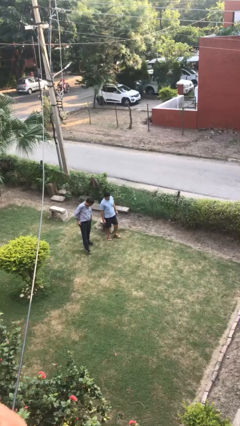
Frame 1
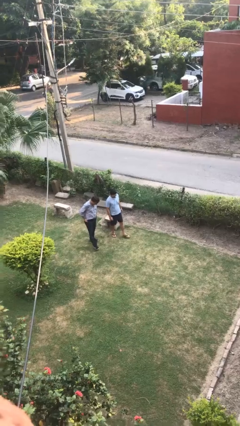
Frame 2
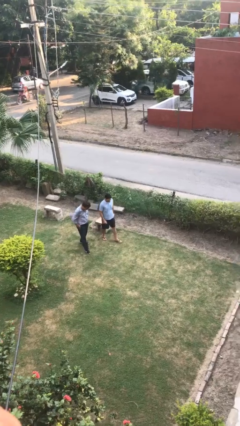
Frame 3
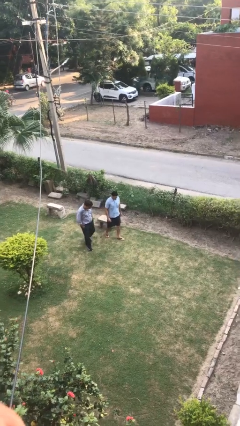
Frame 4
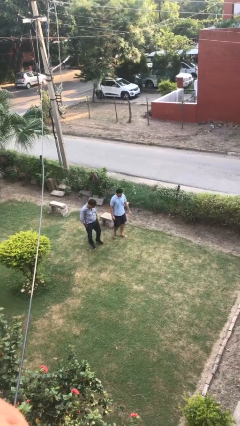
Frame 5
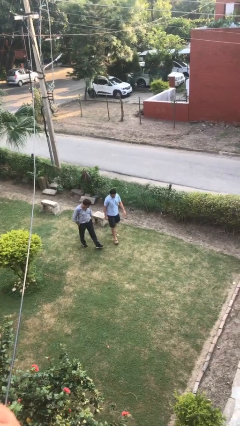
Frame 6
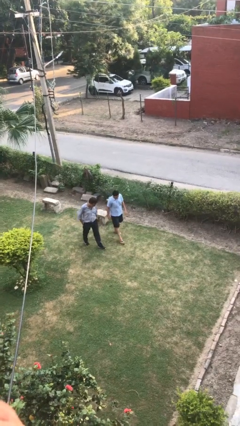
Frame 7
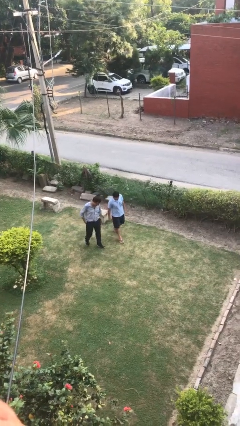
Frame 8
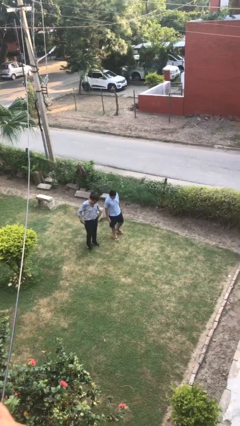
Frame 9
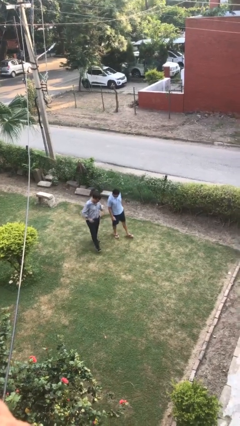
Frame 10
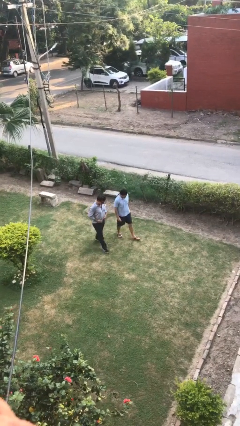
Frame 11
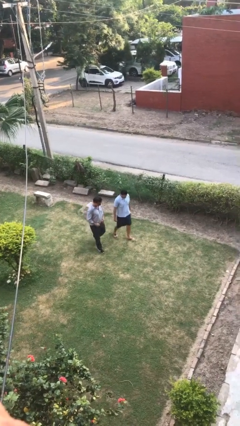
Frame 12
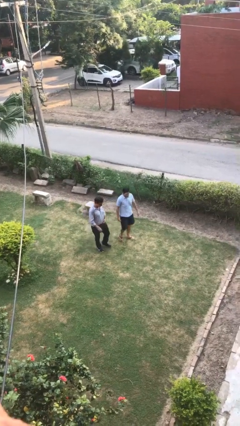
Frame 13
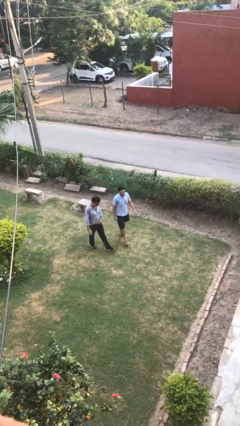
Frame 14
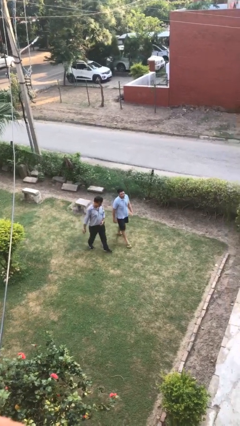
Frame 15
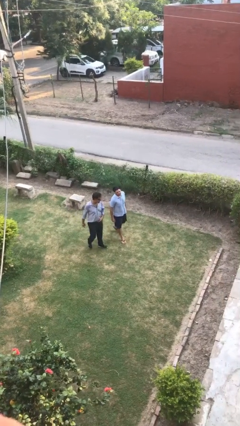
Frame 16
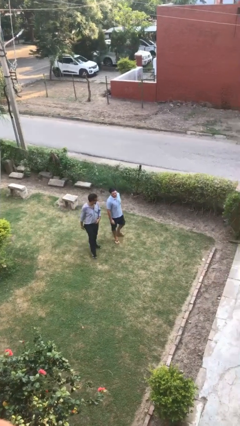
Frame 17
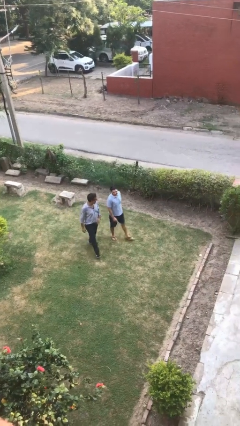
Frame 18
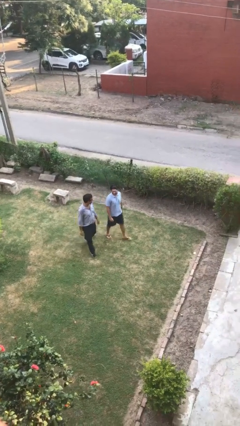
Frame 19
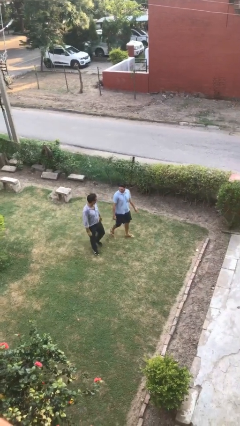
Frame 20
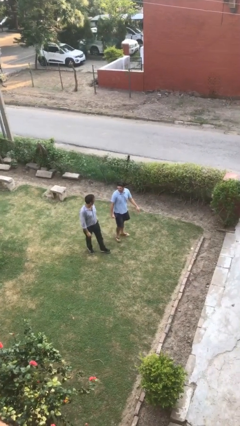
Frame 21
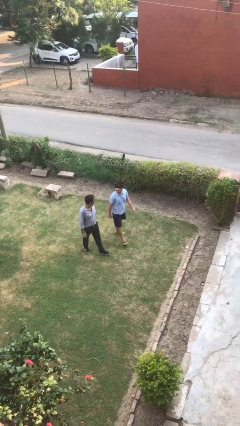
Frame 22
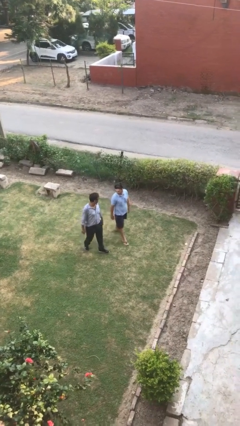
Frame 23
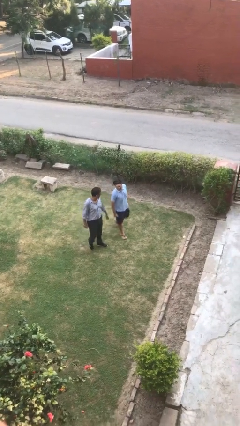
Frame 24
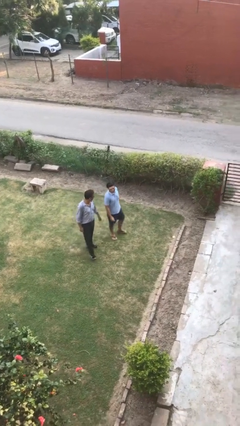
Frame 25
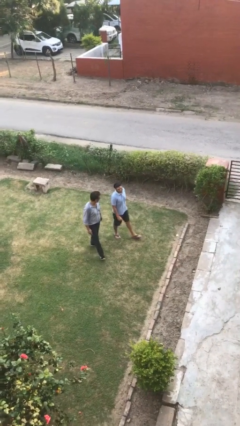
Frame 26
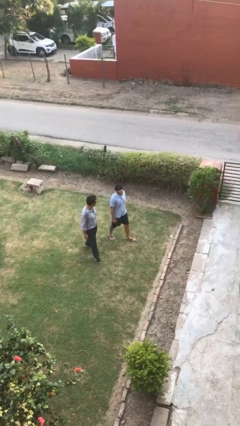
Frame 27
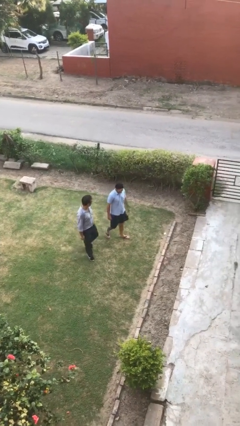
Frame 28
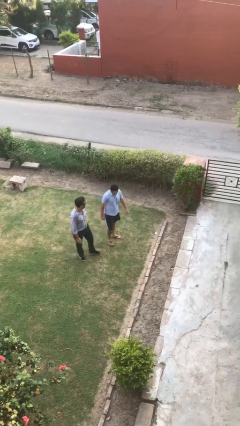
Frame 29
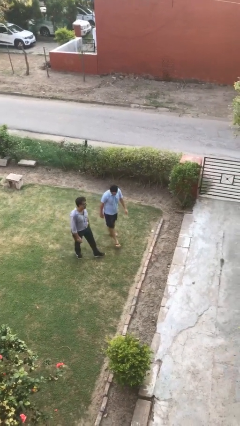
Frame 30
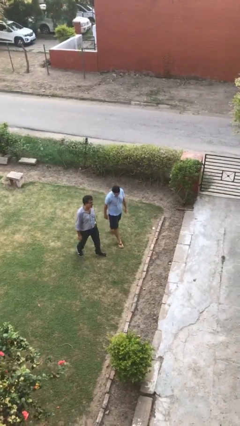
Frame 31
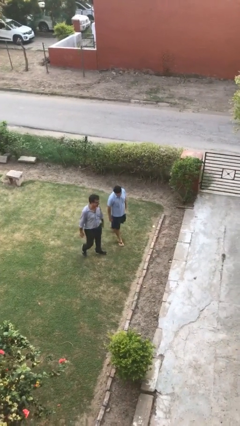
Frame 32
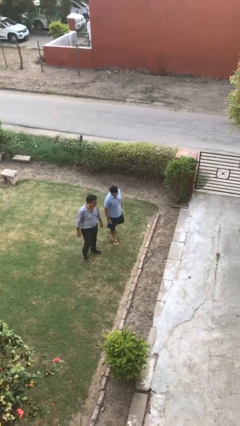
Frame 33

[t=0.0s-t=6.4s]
person talks to person

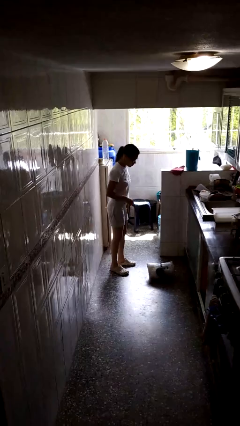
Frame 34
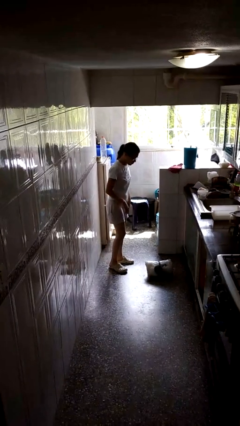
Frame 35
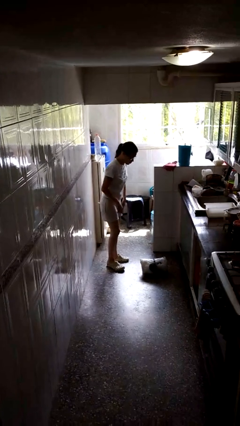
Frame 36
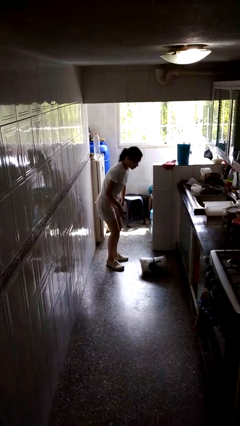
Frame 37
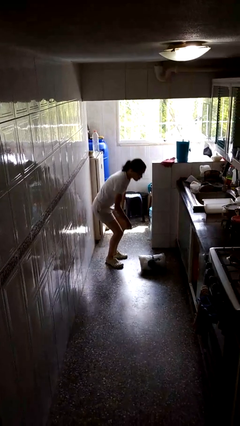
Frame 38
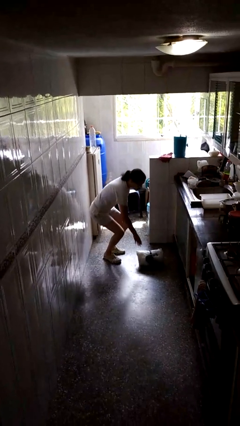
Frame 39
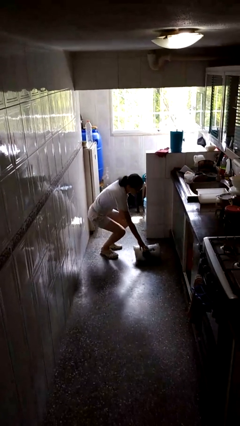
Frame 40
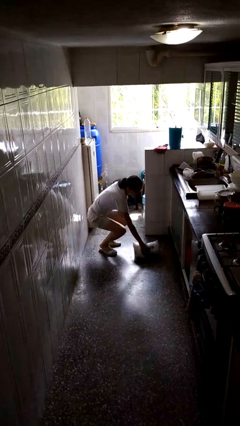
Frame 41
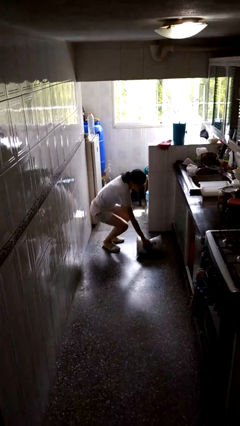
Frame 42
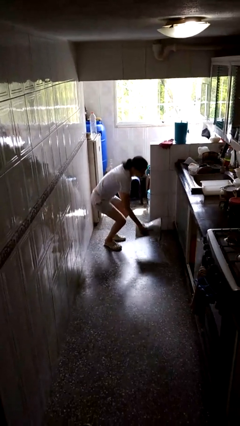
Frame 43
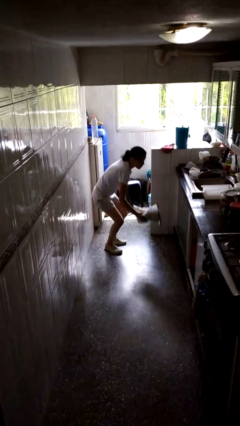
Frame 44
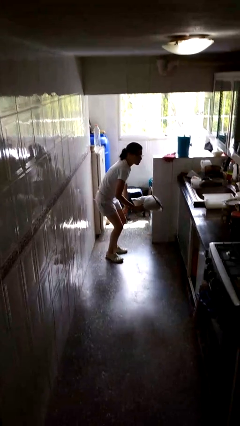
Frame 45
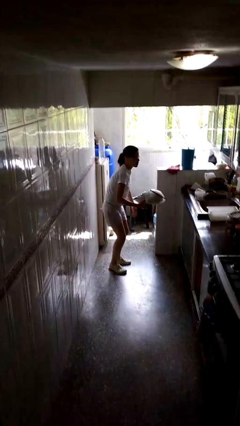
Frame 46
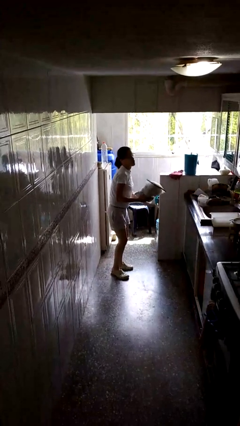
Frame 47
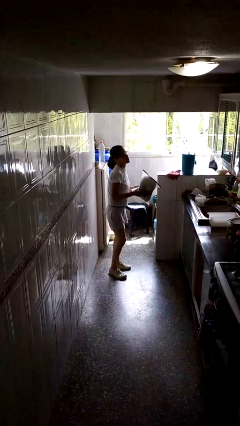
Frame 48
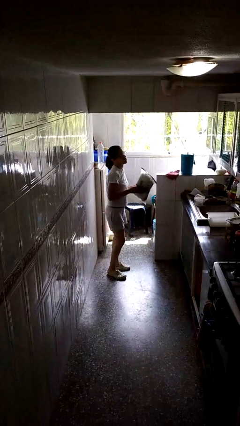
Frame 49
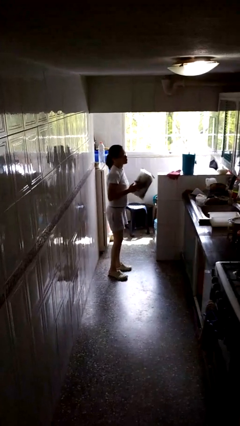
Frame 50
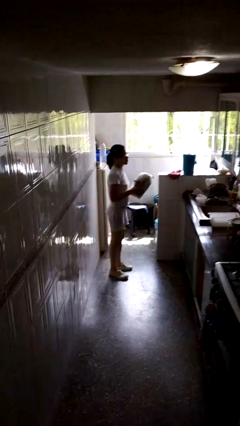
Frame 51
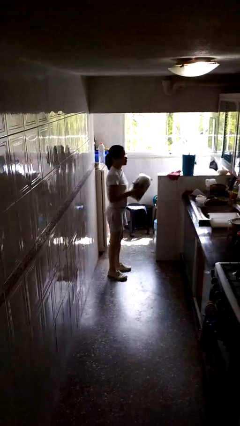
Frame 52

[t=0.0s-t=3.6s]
person picks up object from floor

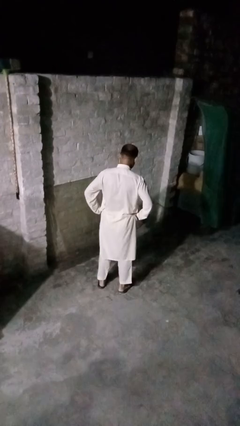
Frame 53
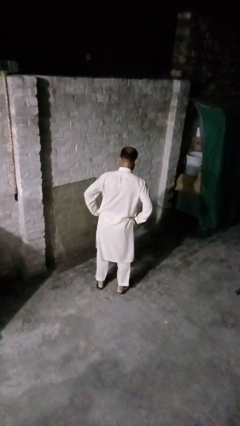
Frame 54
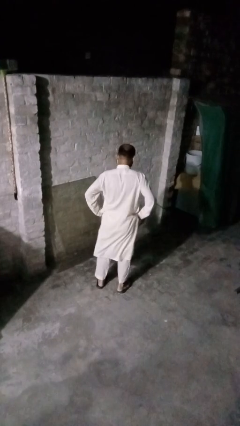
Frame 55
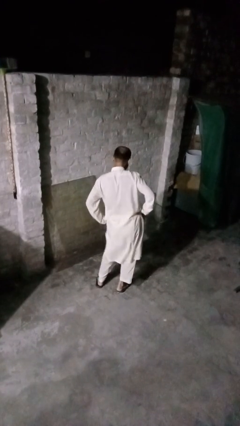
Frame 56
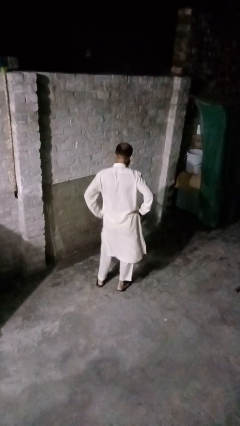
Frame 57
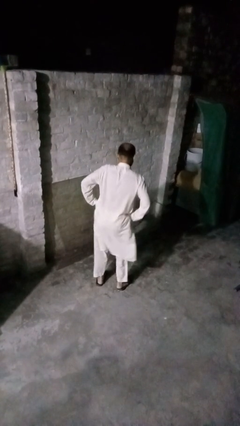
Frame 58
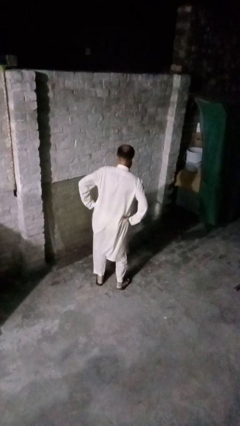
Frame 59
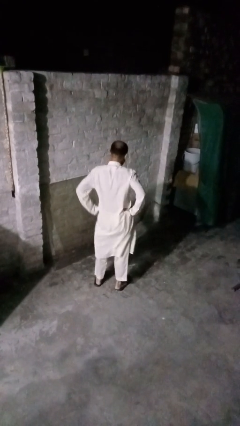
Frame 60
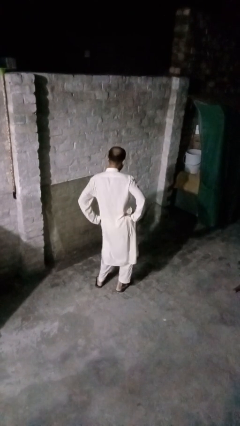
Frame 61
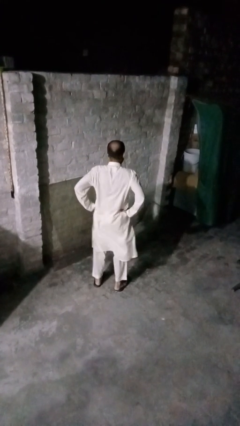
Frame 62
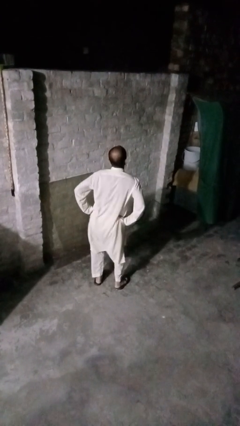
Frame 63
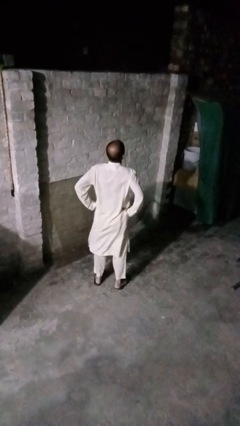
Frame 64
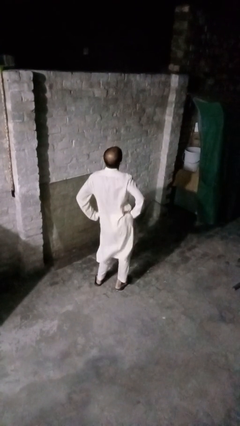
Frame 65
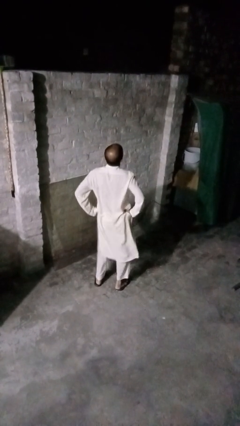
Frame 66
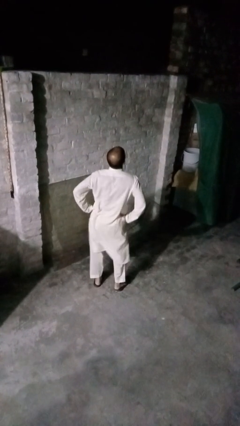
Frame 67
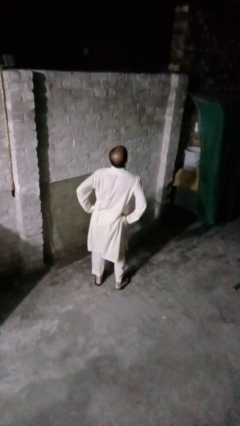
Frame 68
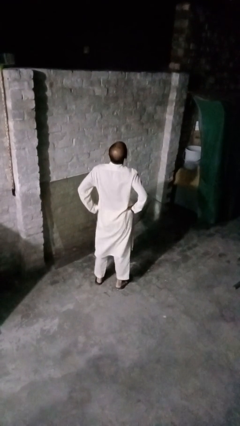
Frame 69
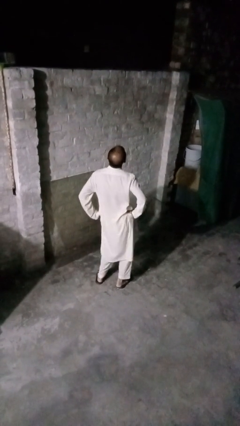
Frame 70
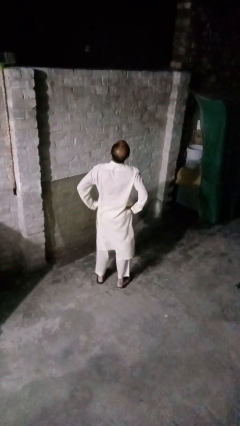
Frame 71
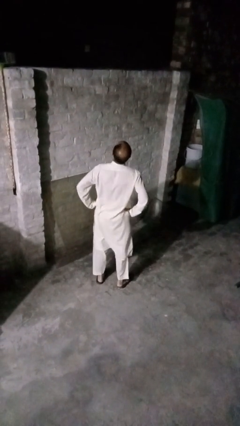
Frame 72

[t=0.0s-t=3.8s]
person wiggles hips

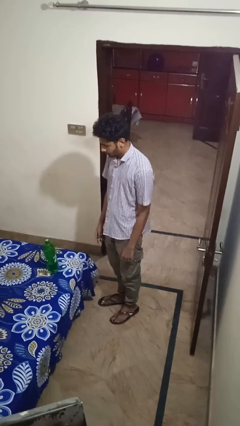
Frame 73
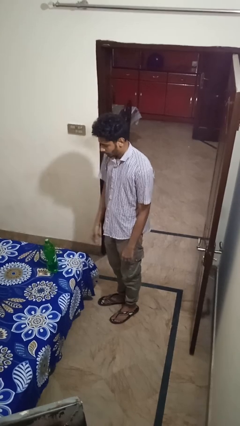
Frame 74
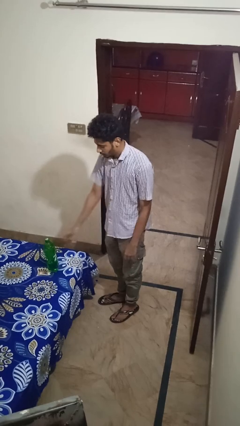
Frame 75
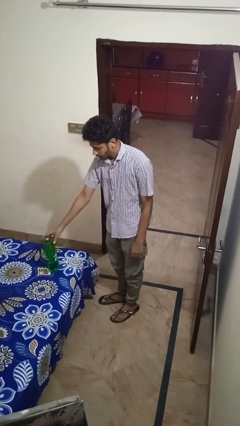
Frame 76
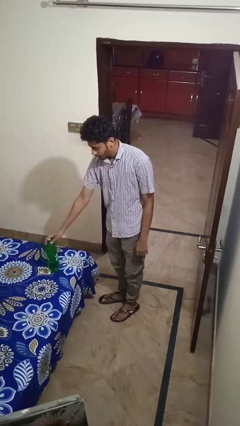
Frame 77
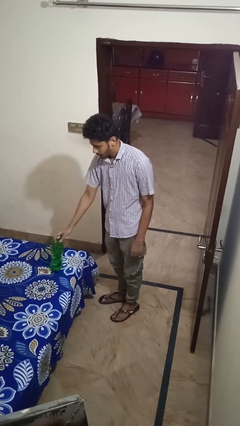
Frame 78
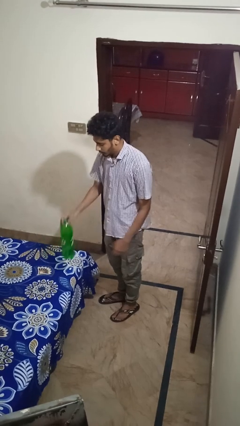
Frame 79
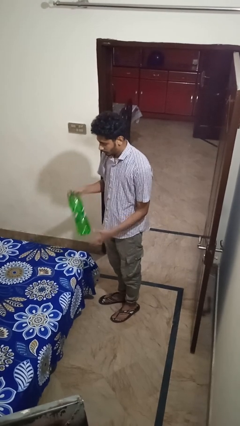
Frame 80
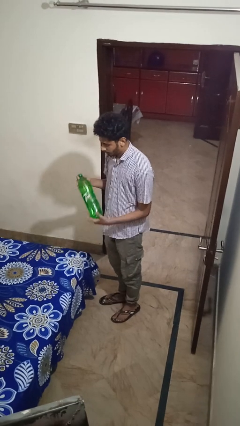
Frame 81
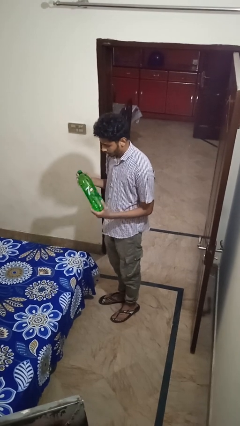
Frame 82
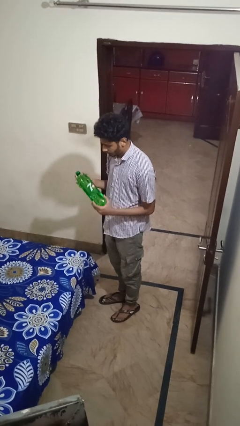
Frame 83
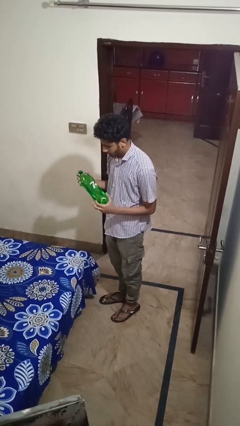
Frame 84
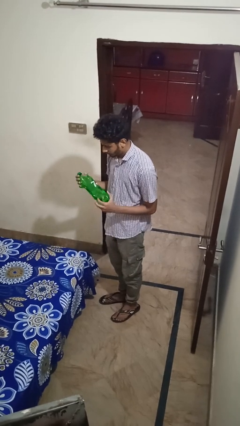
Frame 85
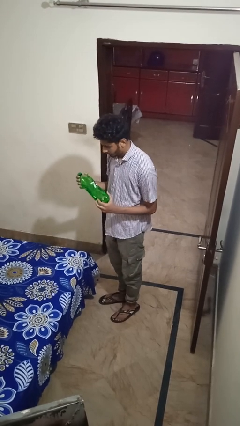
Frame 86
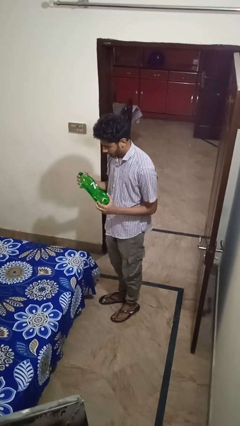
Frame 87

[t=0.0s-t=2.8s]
person picks up object from bed

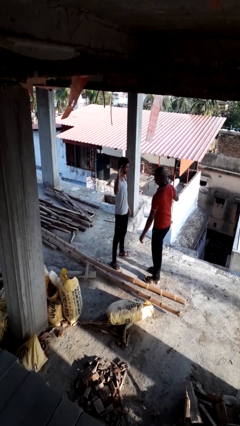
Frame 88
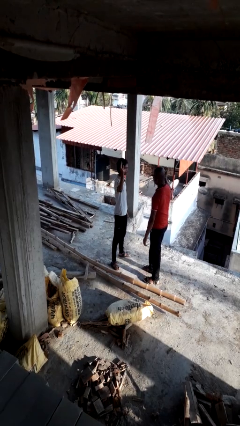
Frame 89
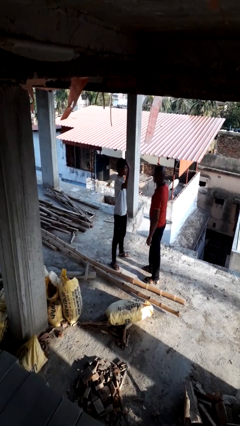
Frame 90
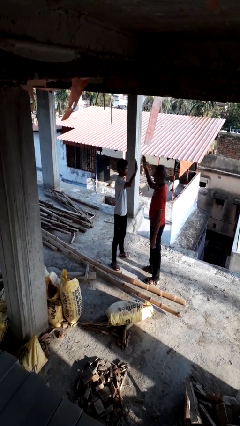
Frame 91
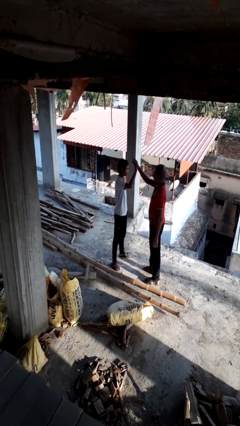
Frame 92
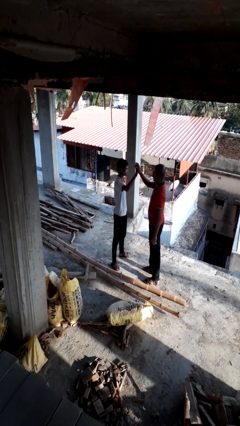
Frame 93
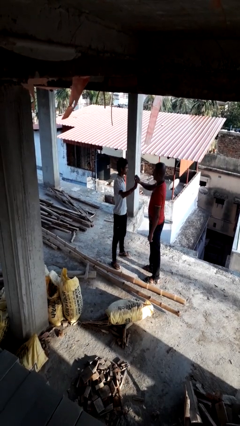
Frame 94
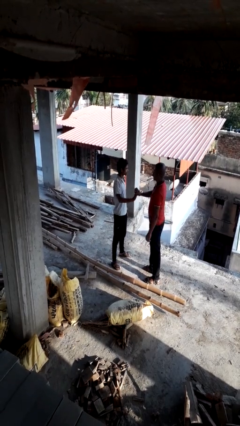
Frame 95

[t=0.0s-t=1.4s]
person highfives hand
